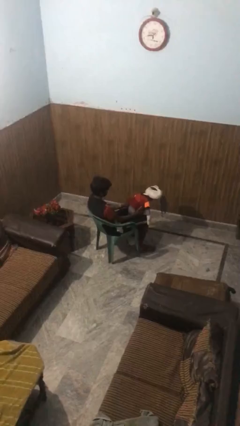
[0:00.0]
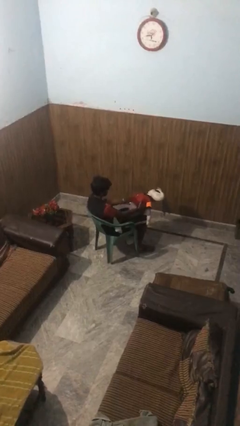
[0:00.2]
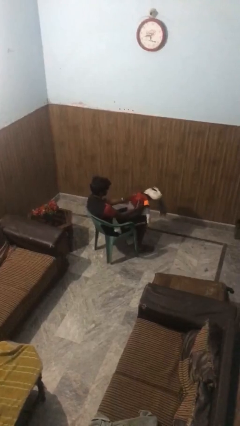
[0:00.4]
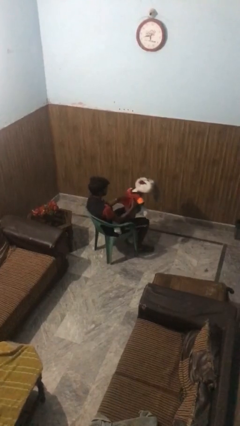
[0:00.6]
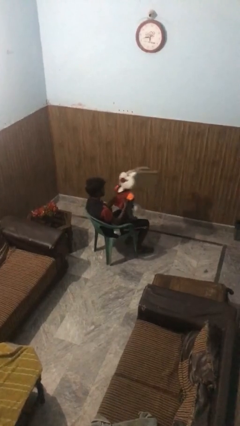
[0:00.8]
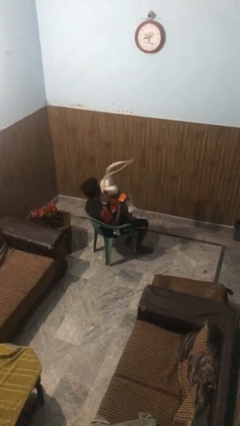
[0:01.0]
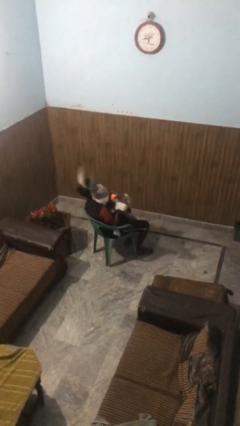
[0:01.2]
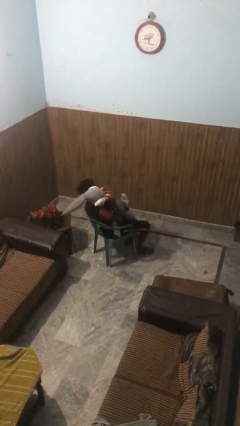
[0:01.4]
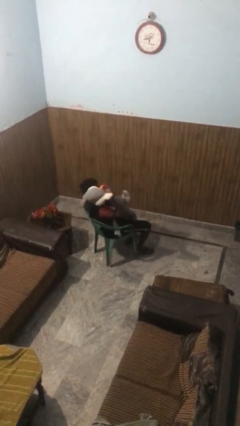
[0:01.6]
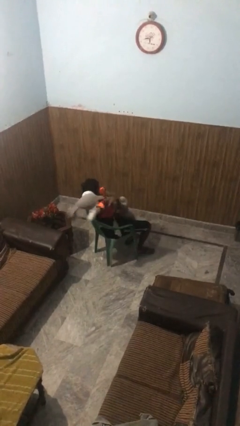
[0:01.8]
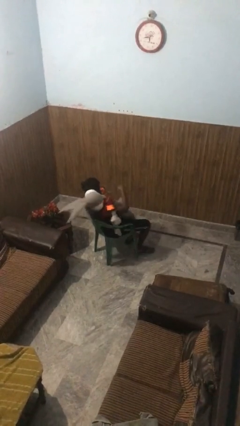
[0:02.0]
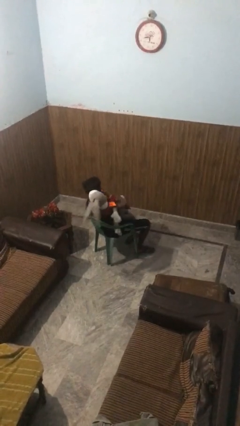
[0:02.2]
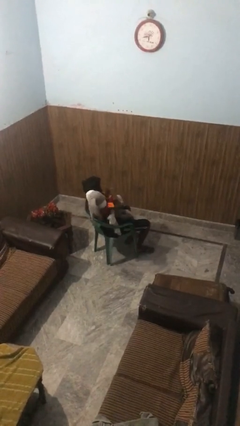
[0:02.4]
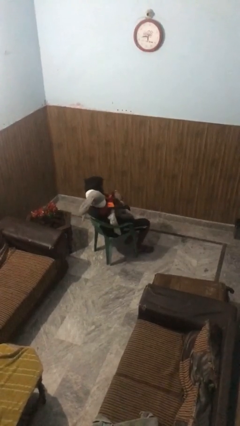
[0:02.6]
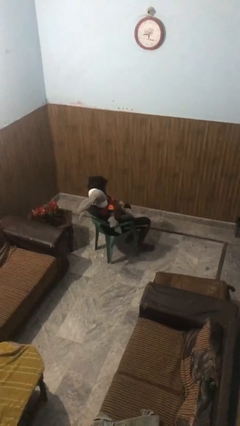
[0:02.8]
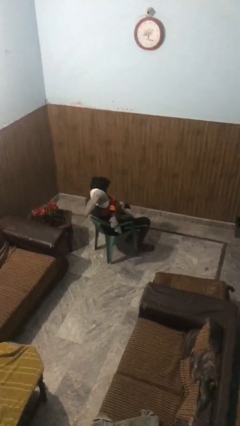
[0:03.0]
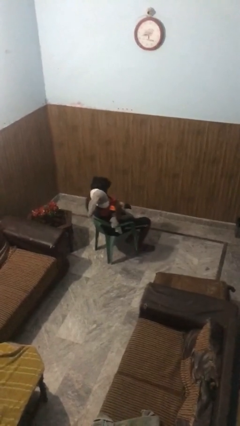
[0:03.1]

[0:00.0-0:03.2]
person hugs stuffed animal

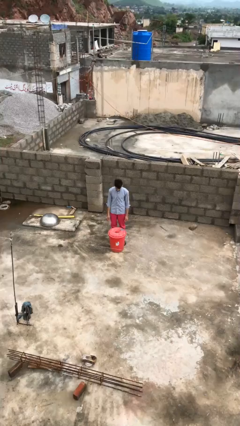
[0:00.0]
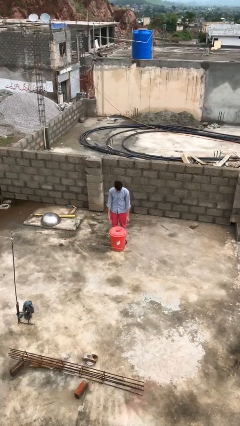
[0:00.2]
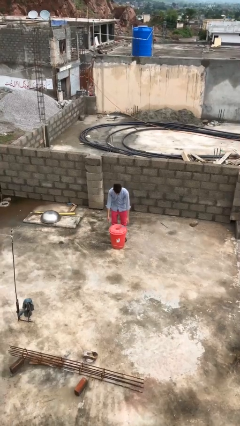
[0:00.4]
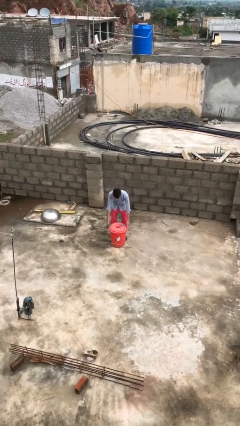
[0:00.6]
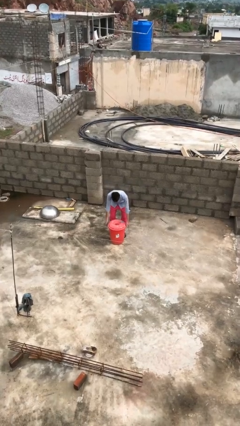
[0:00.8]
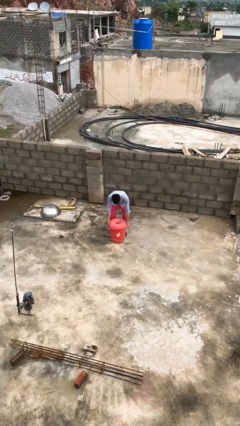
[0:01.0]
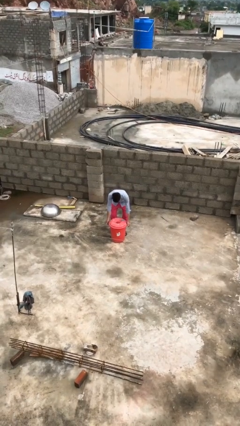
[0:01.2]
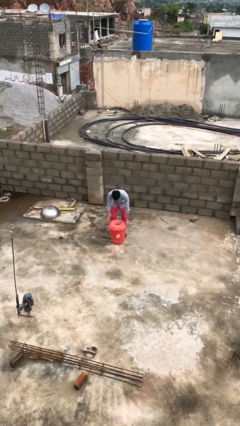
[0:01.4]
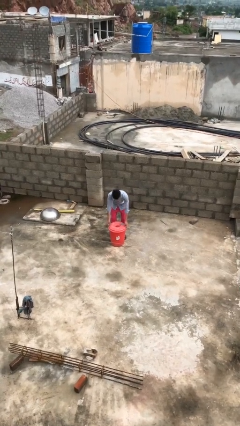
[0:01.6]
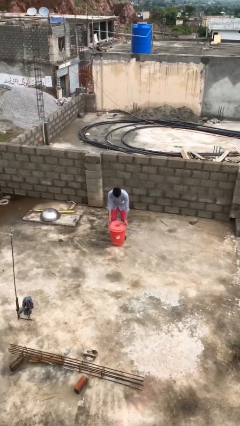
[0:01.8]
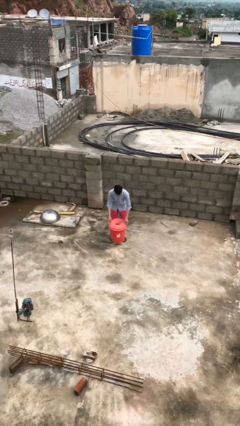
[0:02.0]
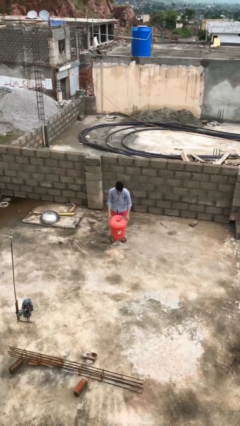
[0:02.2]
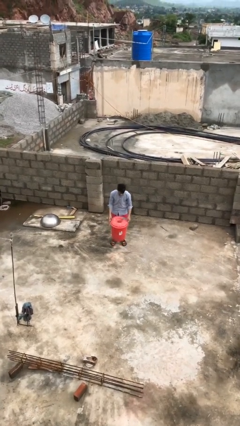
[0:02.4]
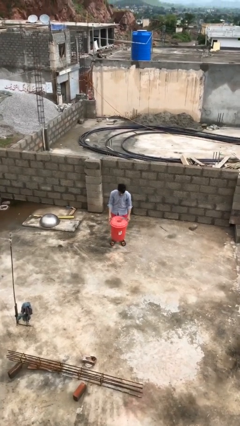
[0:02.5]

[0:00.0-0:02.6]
person picks up object from floor

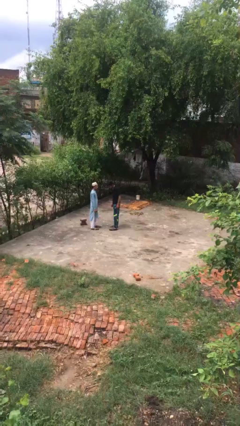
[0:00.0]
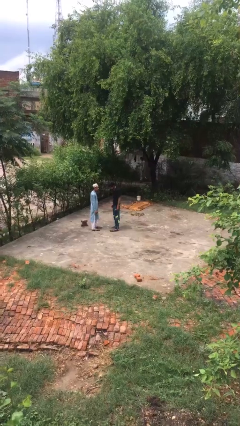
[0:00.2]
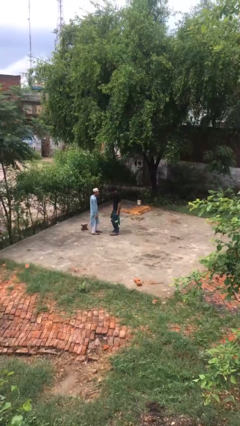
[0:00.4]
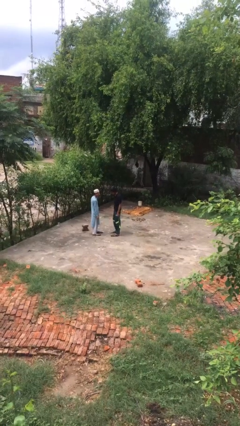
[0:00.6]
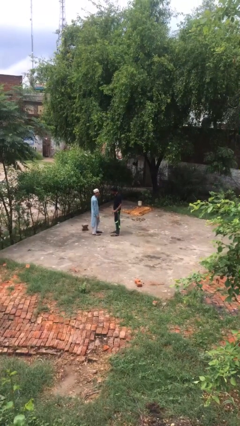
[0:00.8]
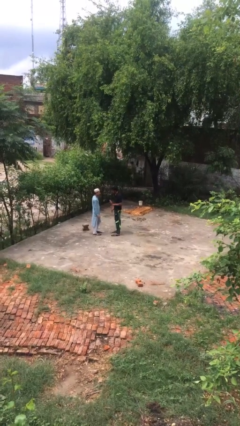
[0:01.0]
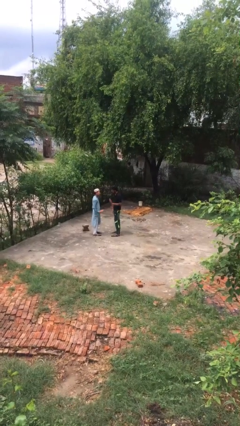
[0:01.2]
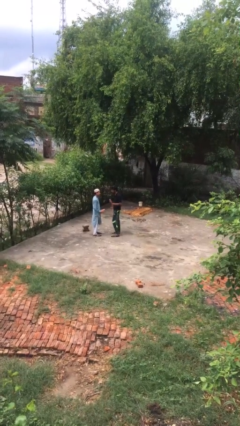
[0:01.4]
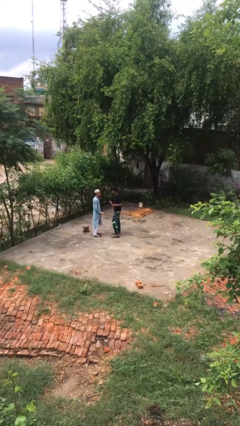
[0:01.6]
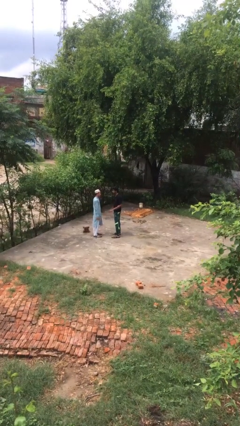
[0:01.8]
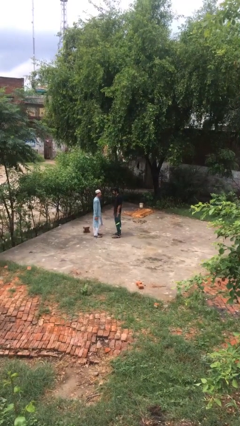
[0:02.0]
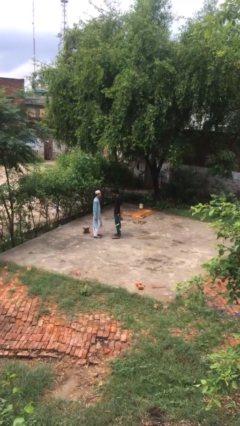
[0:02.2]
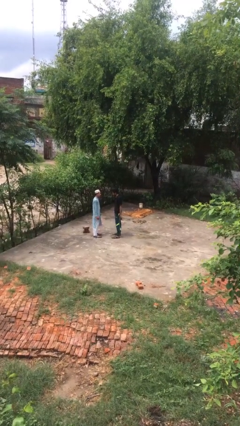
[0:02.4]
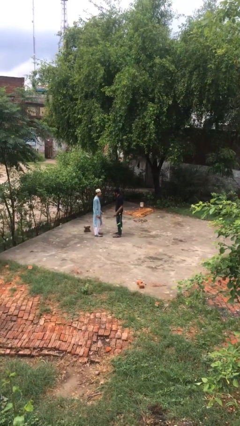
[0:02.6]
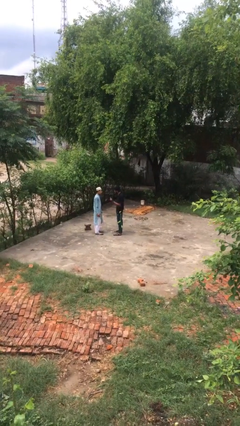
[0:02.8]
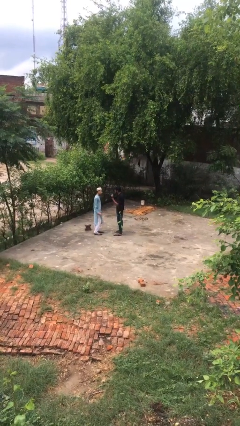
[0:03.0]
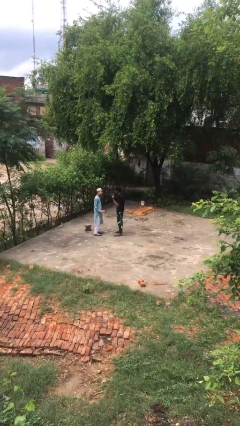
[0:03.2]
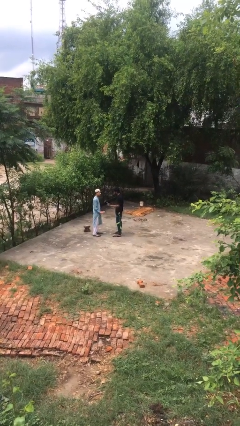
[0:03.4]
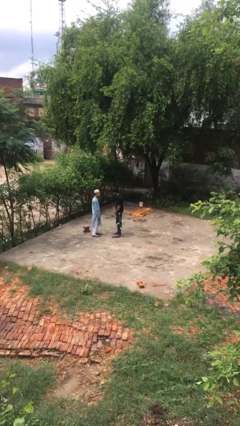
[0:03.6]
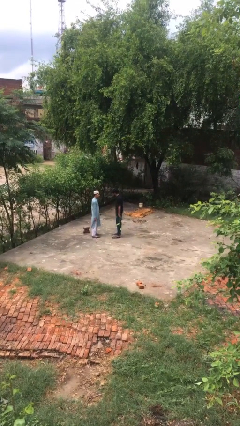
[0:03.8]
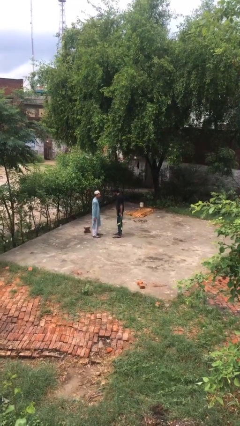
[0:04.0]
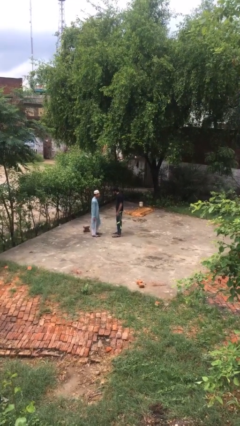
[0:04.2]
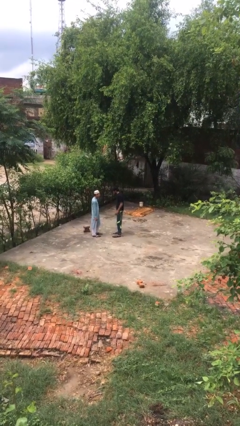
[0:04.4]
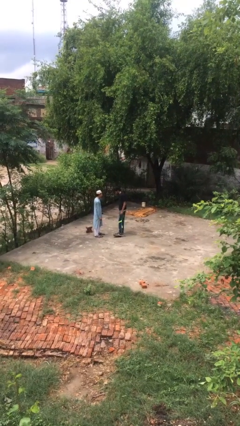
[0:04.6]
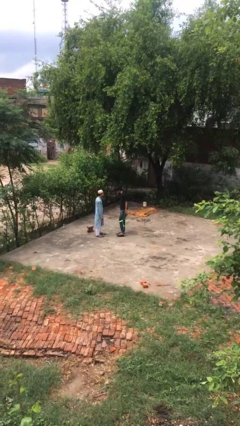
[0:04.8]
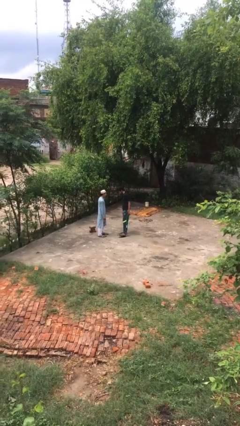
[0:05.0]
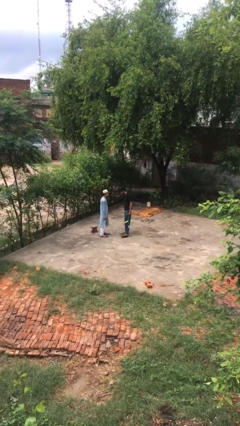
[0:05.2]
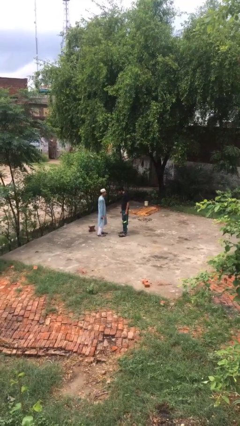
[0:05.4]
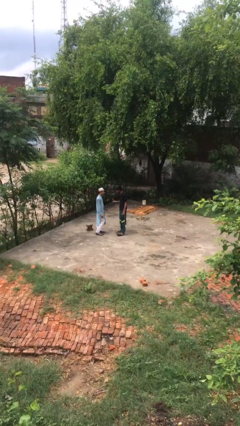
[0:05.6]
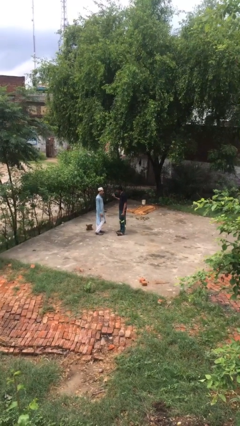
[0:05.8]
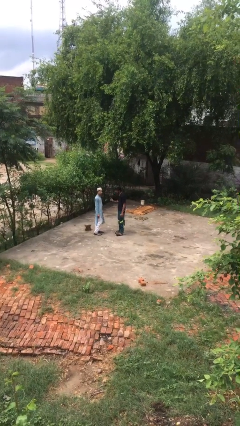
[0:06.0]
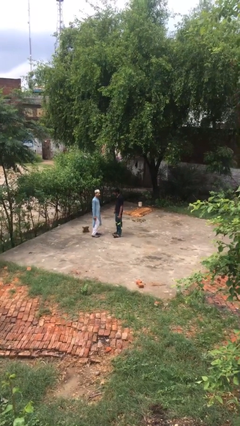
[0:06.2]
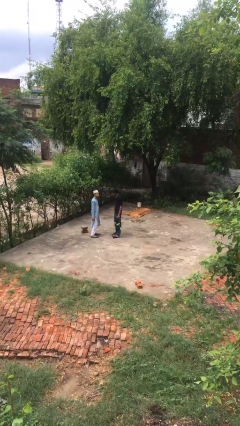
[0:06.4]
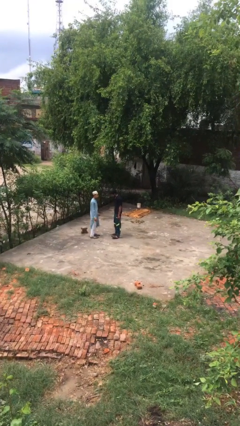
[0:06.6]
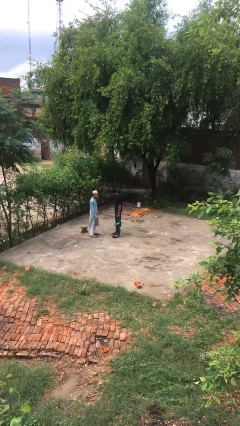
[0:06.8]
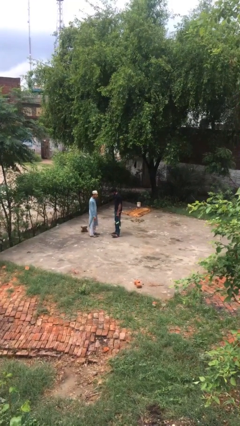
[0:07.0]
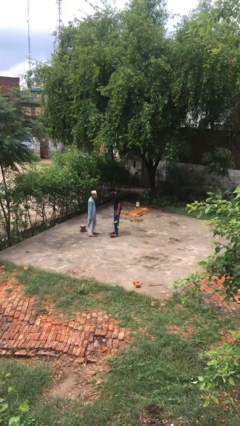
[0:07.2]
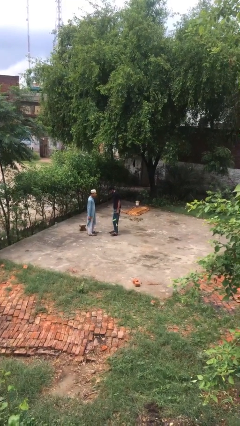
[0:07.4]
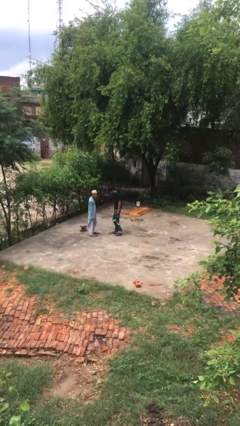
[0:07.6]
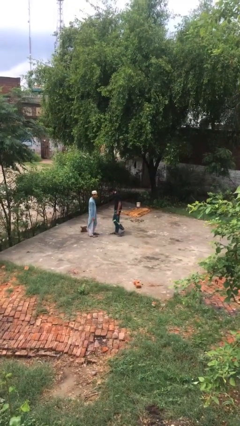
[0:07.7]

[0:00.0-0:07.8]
person talks to person

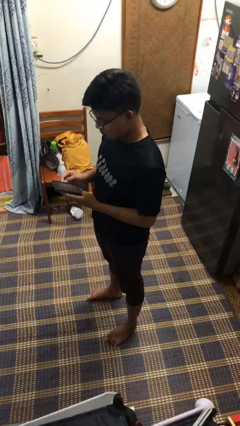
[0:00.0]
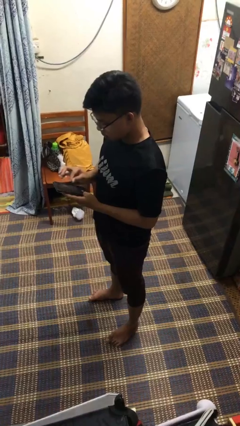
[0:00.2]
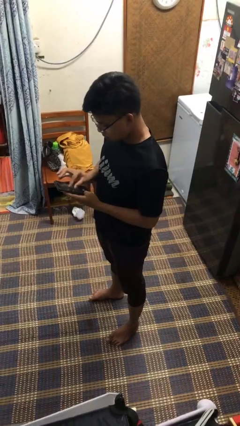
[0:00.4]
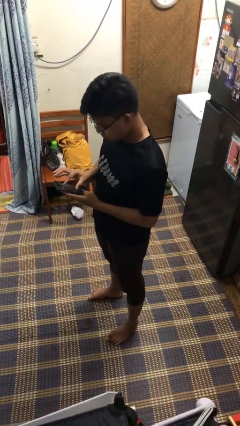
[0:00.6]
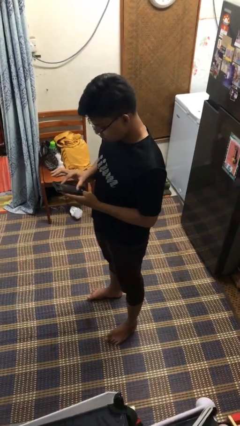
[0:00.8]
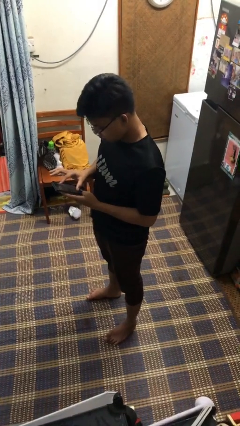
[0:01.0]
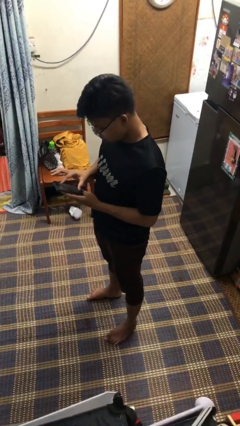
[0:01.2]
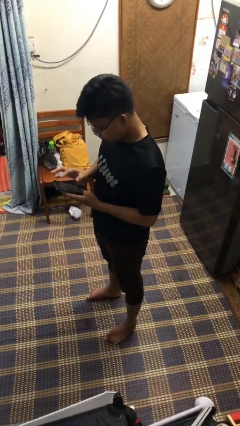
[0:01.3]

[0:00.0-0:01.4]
person gestures zoom in

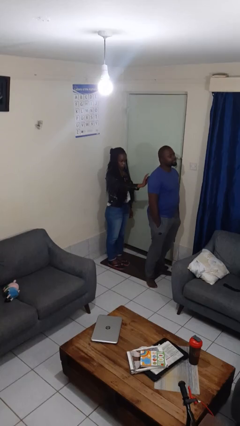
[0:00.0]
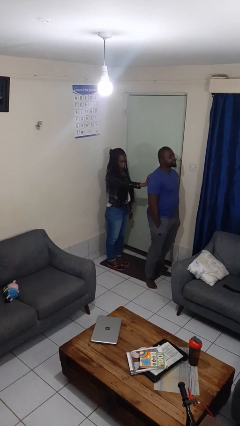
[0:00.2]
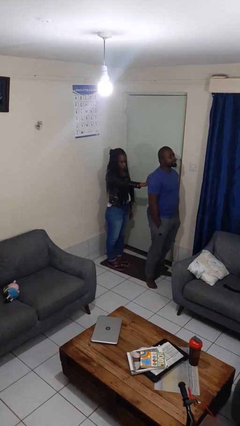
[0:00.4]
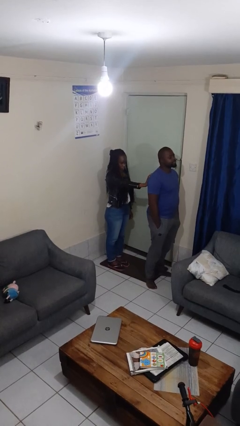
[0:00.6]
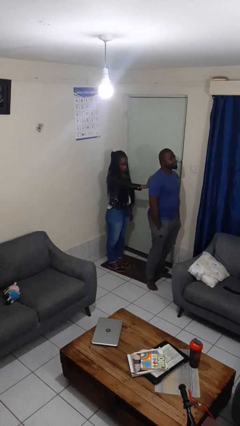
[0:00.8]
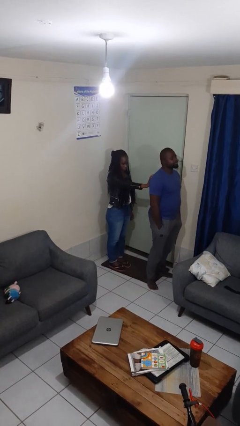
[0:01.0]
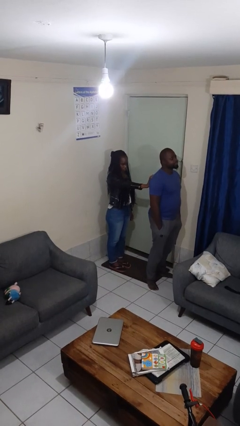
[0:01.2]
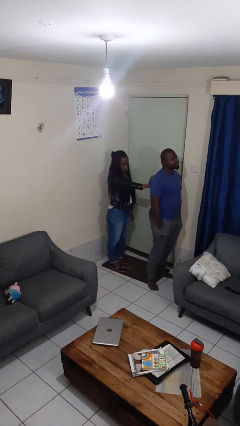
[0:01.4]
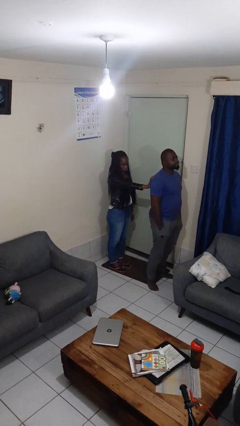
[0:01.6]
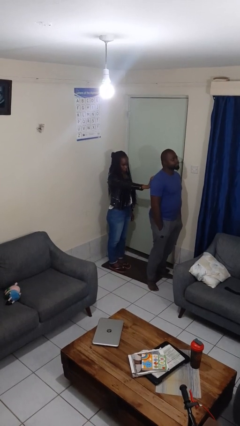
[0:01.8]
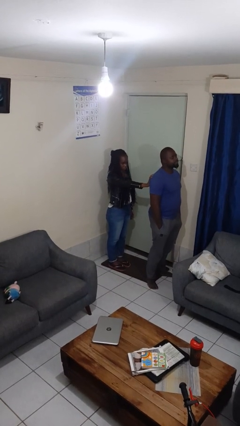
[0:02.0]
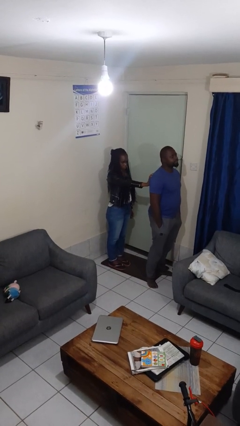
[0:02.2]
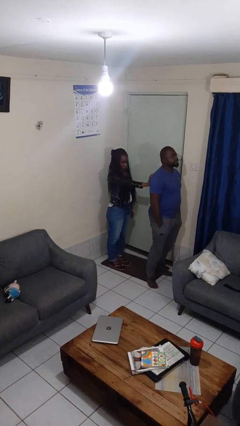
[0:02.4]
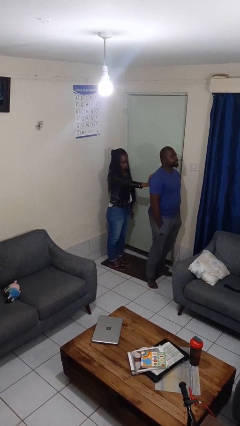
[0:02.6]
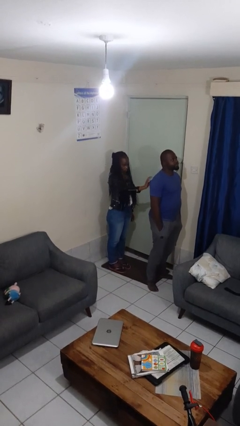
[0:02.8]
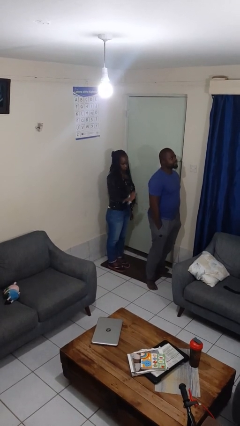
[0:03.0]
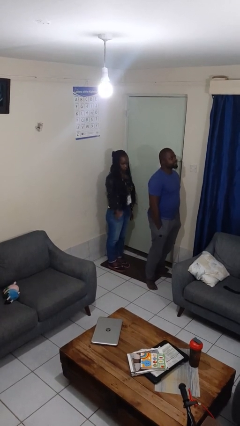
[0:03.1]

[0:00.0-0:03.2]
person touches back of person
